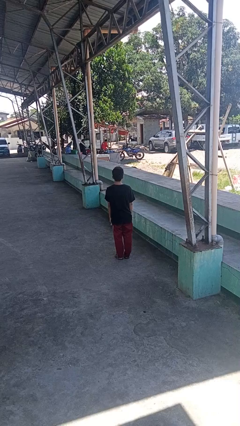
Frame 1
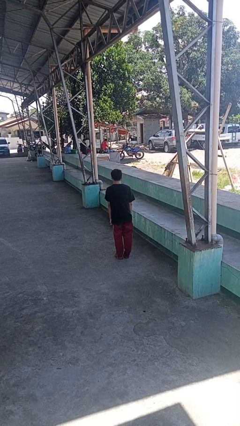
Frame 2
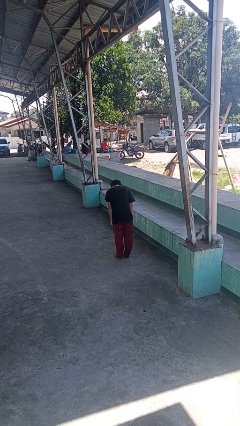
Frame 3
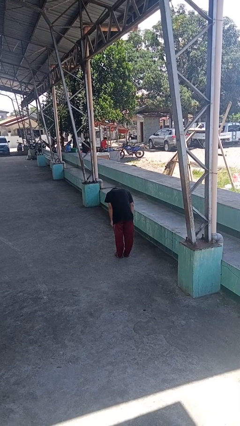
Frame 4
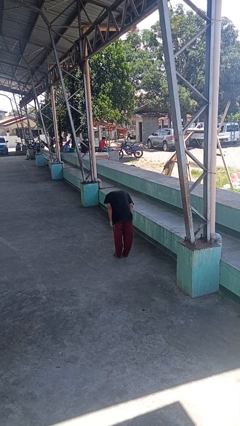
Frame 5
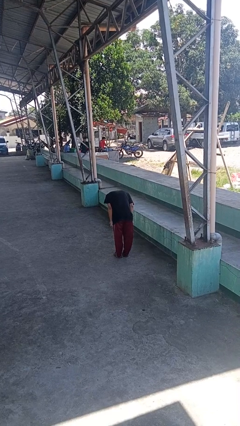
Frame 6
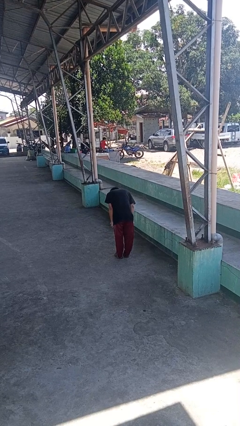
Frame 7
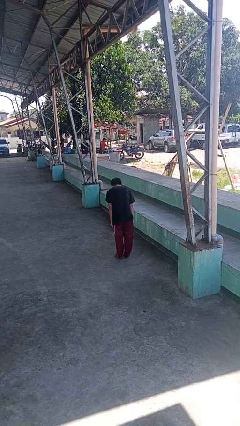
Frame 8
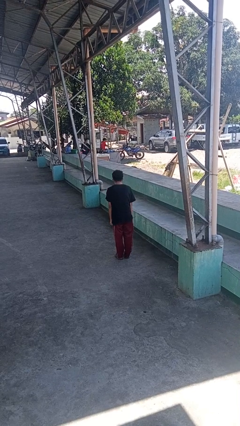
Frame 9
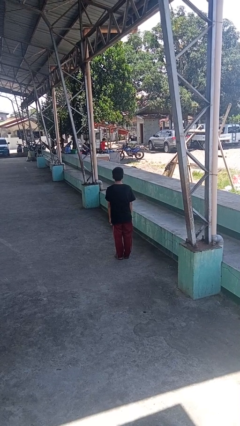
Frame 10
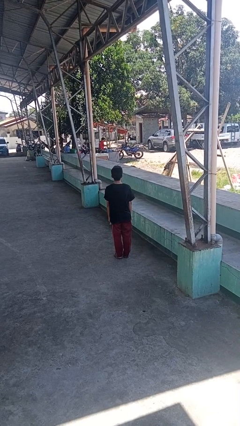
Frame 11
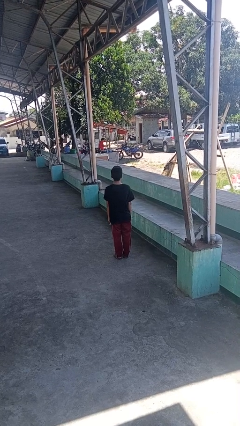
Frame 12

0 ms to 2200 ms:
person bows

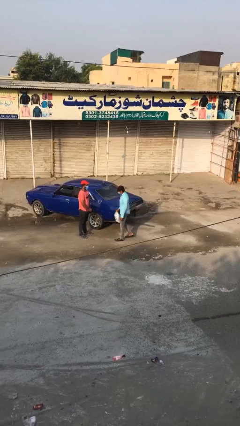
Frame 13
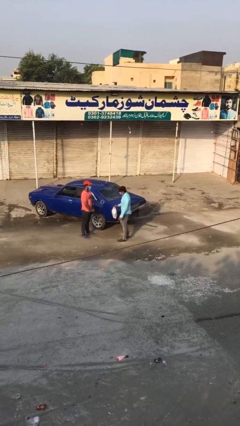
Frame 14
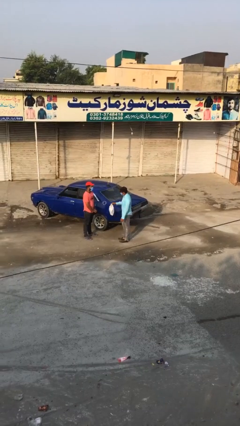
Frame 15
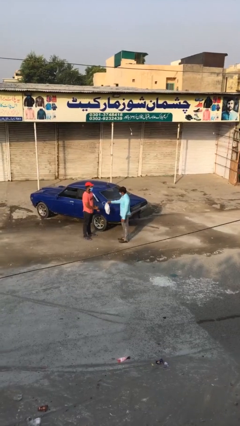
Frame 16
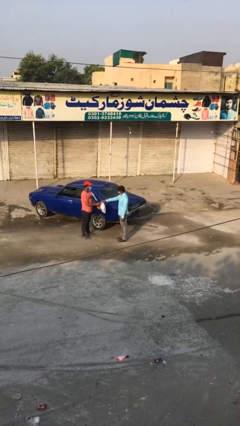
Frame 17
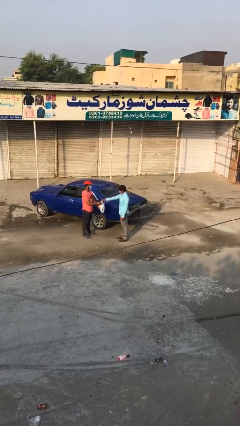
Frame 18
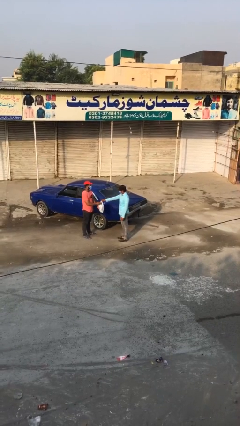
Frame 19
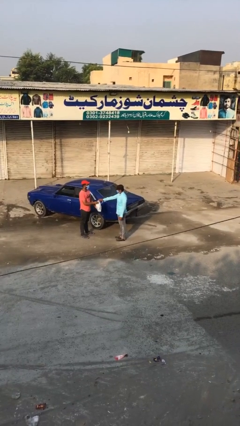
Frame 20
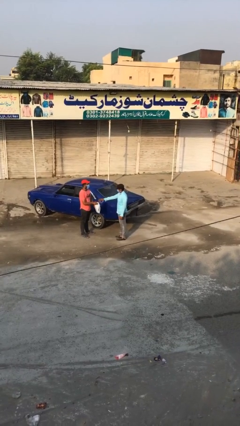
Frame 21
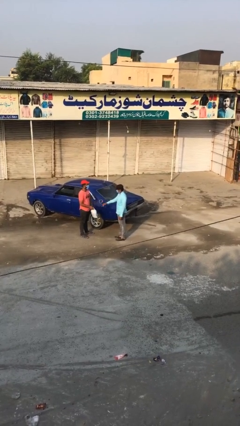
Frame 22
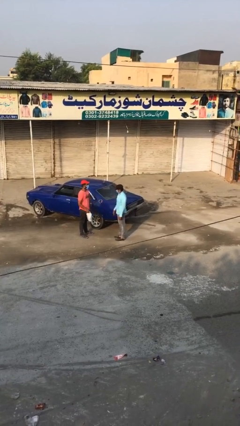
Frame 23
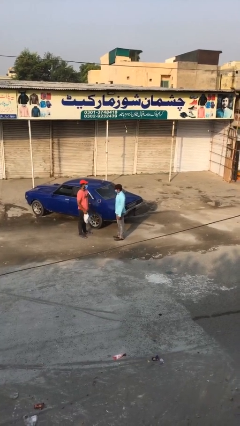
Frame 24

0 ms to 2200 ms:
person transfers object to person

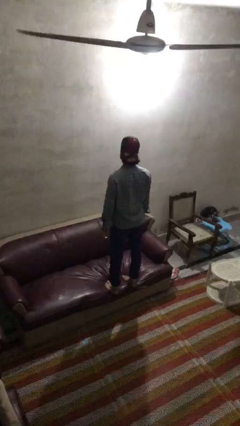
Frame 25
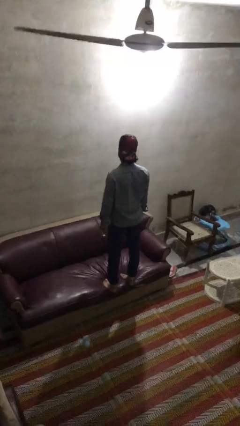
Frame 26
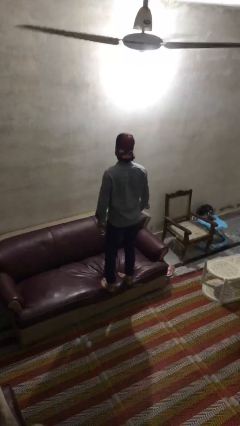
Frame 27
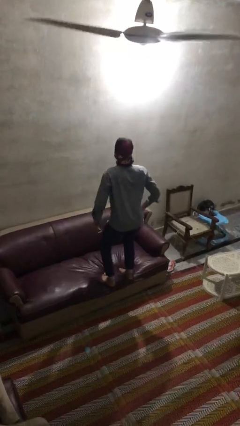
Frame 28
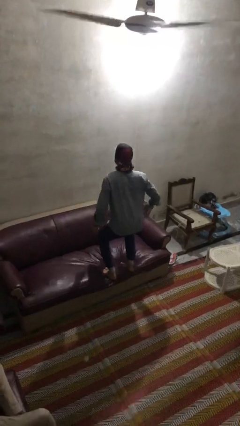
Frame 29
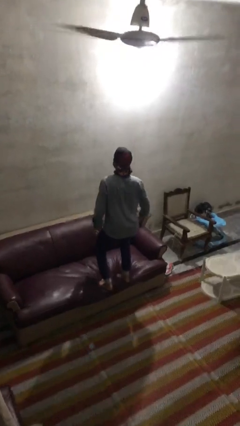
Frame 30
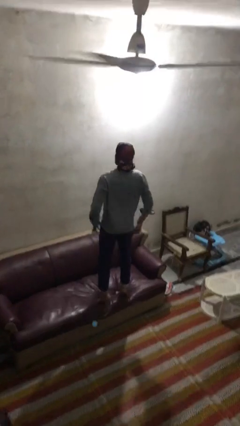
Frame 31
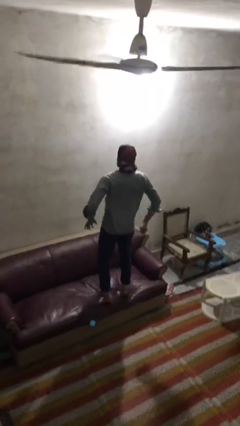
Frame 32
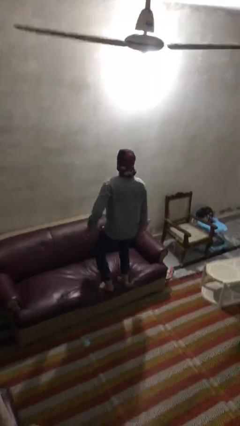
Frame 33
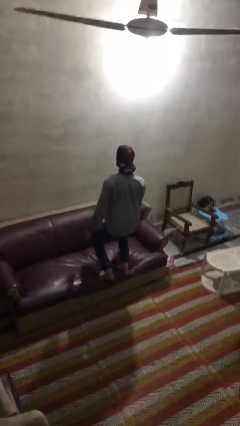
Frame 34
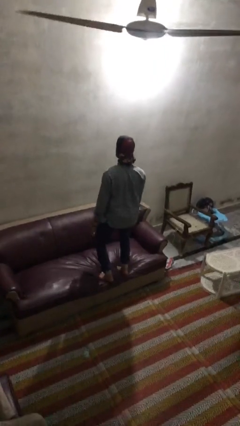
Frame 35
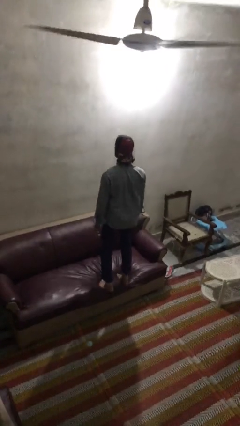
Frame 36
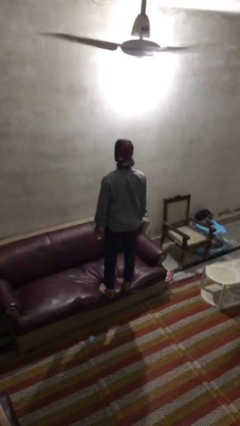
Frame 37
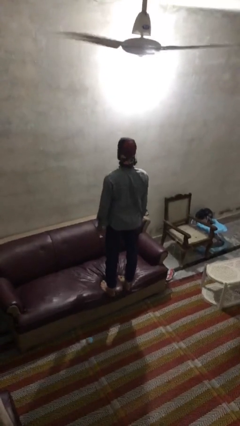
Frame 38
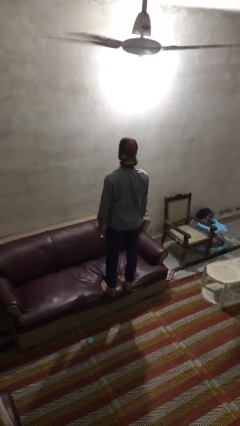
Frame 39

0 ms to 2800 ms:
person jumps on couch

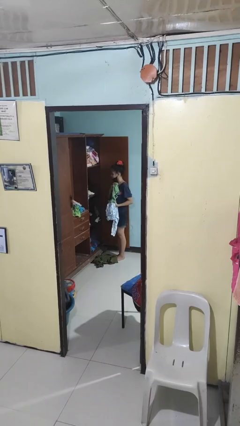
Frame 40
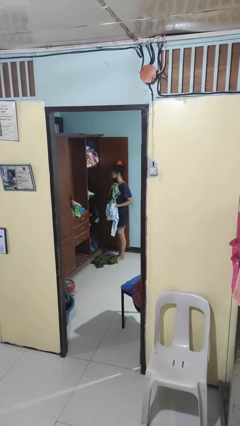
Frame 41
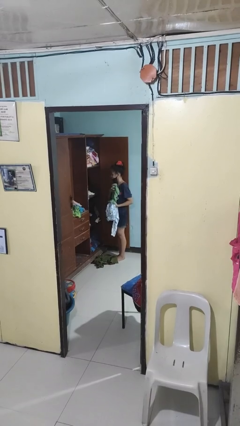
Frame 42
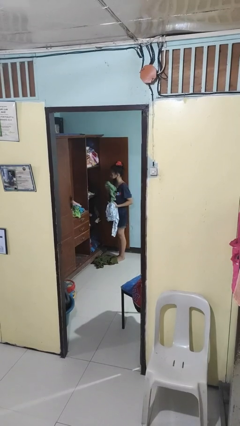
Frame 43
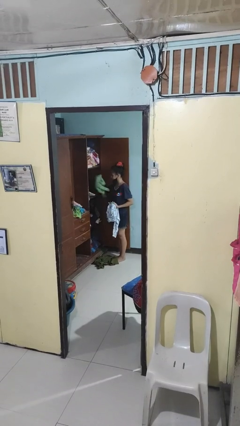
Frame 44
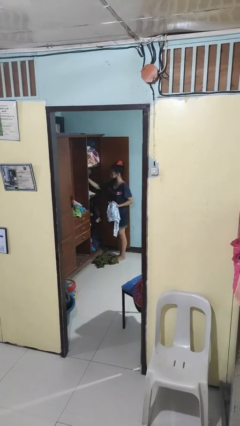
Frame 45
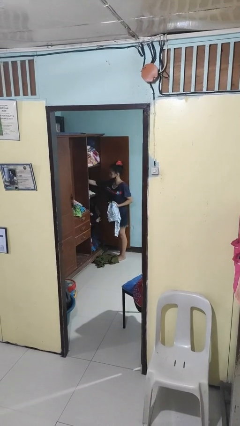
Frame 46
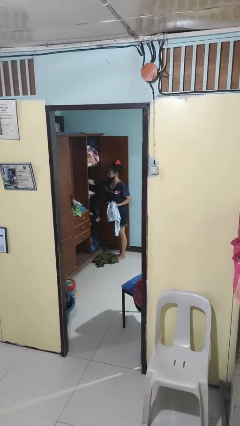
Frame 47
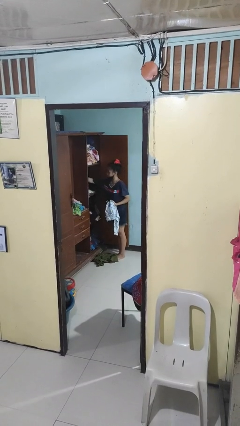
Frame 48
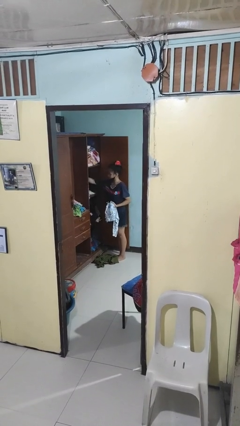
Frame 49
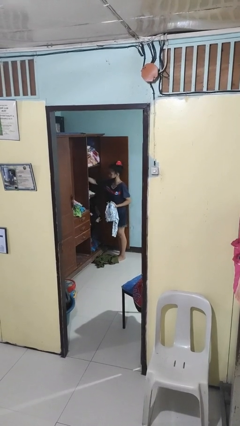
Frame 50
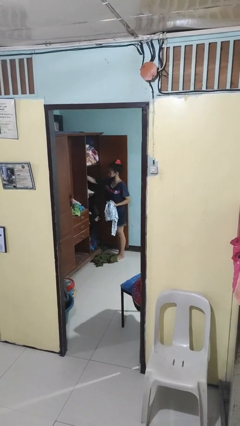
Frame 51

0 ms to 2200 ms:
person puts clothes into dresser

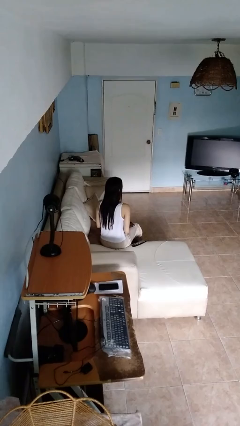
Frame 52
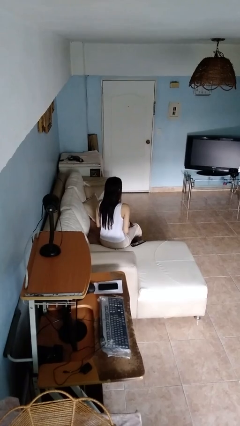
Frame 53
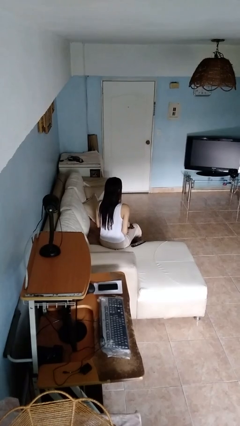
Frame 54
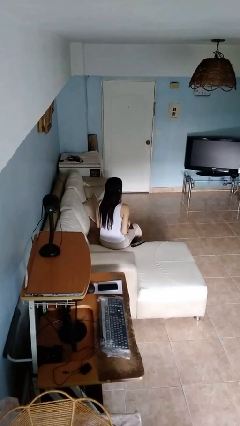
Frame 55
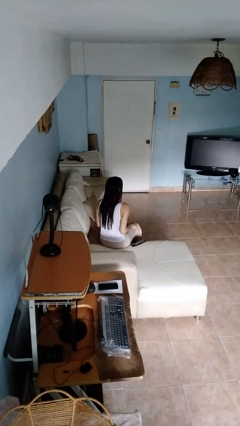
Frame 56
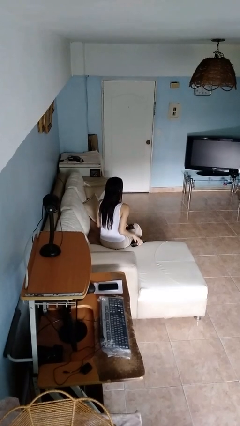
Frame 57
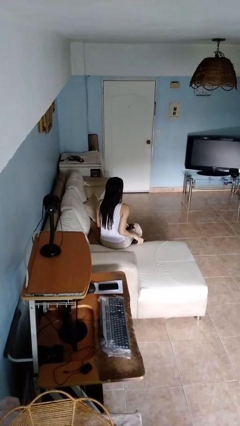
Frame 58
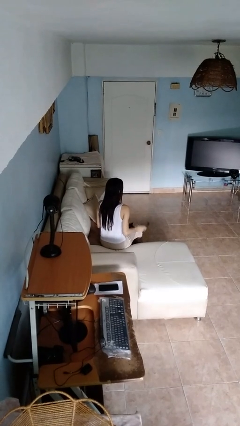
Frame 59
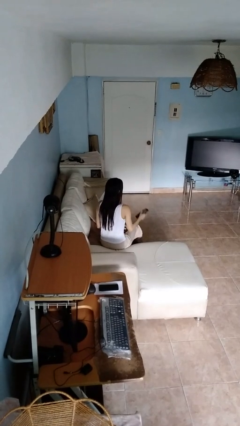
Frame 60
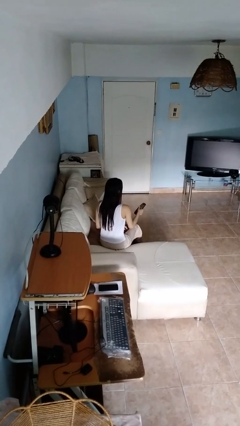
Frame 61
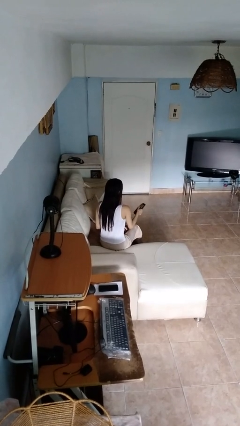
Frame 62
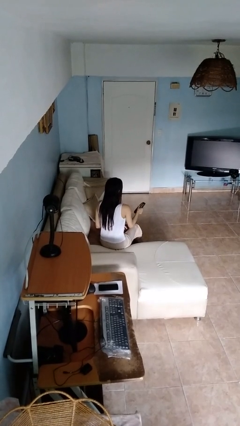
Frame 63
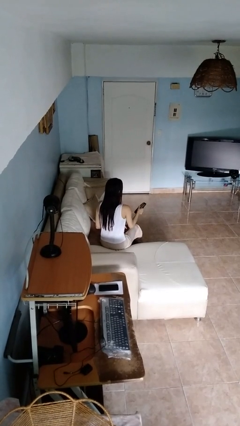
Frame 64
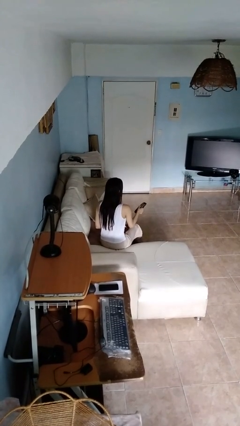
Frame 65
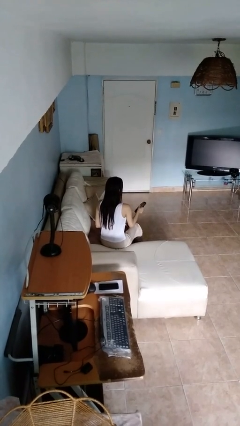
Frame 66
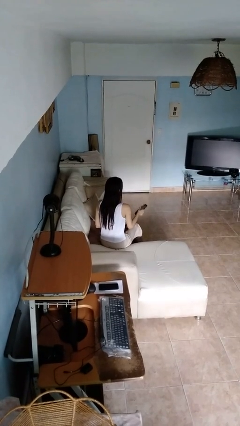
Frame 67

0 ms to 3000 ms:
person uses television remote

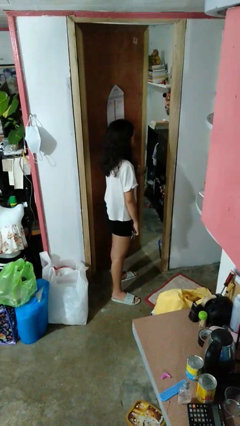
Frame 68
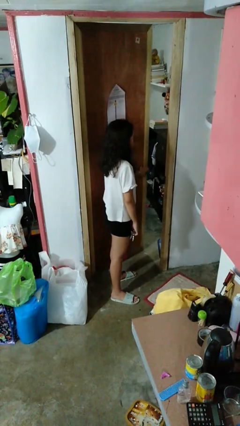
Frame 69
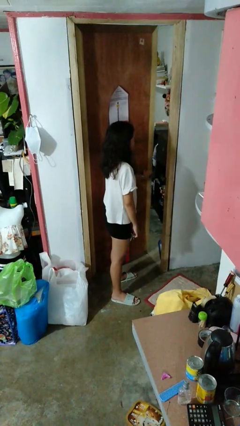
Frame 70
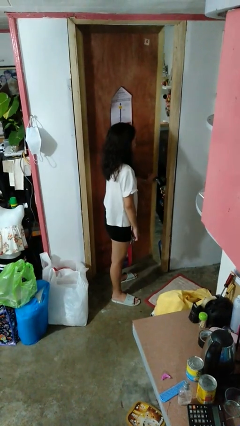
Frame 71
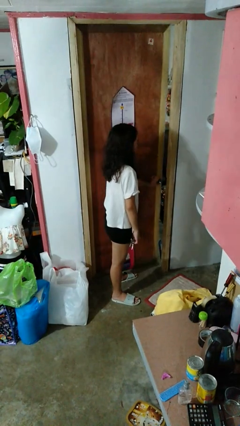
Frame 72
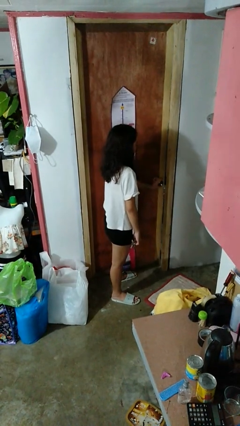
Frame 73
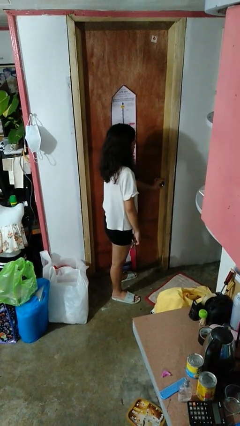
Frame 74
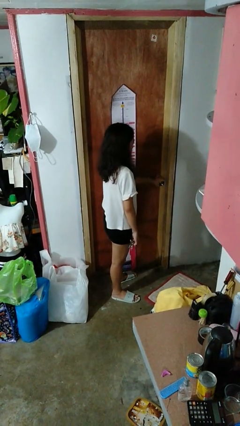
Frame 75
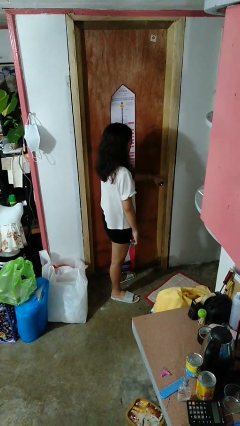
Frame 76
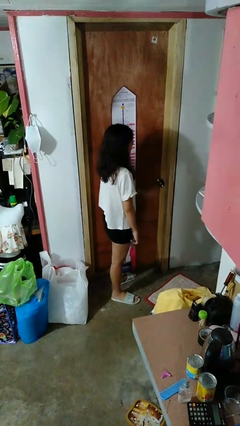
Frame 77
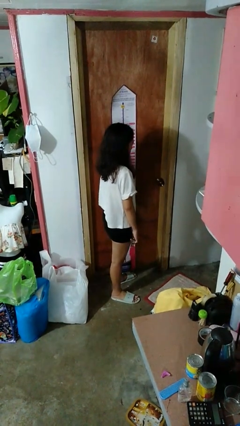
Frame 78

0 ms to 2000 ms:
person closes facility door

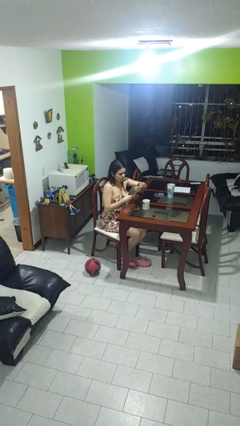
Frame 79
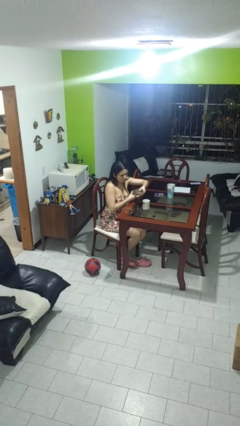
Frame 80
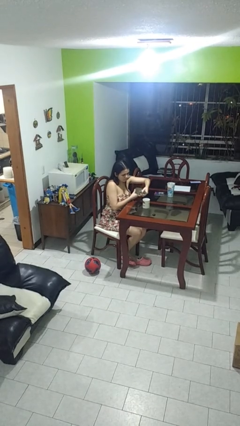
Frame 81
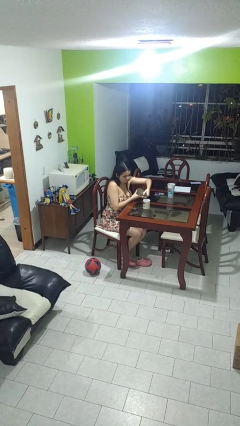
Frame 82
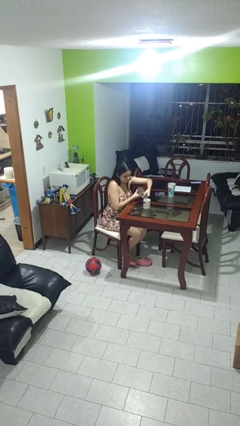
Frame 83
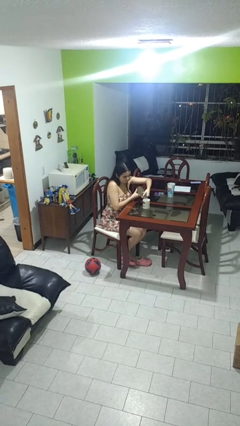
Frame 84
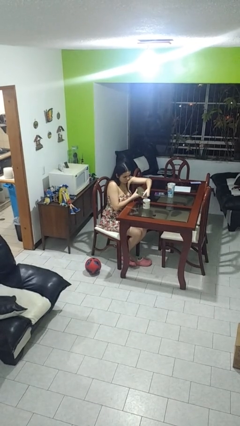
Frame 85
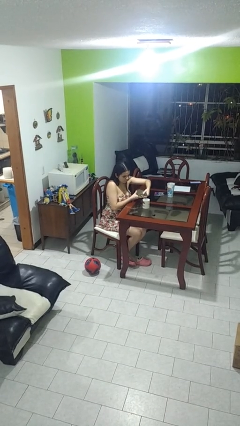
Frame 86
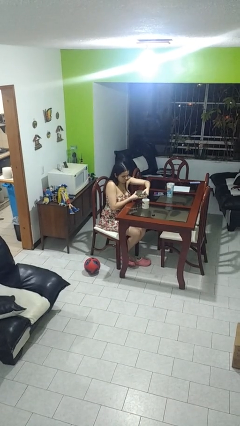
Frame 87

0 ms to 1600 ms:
person pours liquid into cup

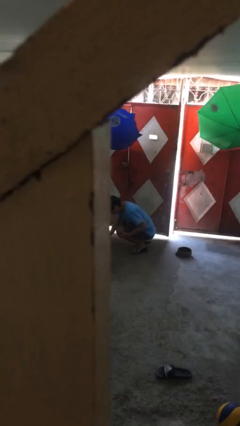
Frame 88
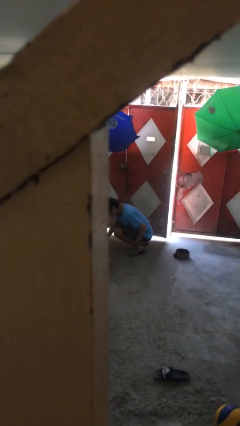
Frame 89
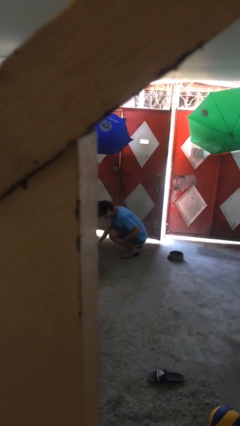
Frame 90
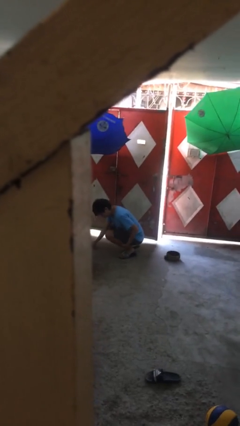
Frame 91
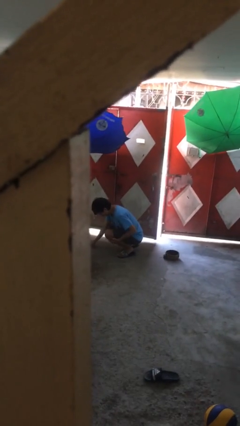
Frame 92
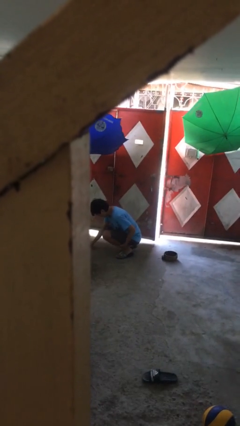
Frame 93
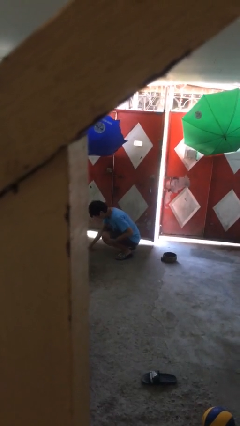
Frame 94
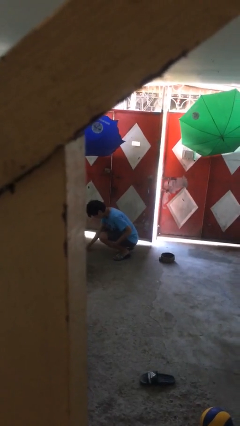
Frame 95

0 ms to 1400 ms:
person lies down on floor
